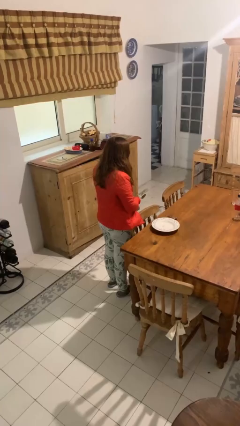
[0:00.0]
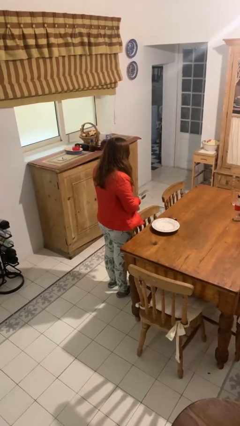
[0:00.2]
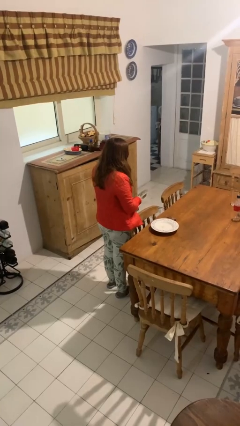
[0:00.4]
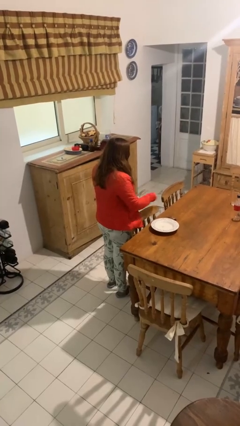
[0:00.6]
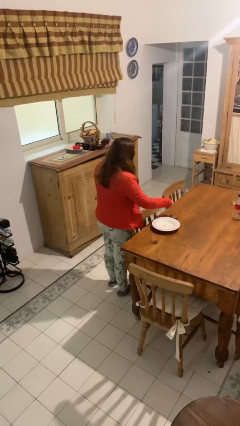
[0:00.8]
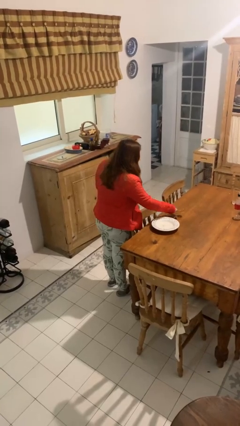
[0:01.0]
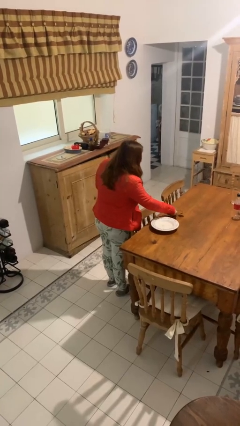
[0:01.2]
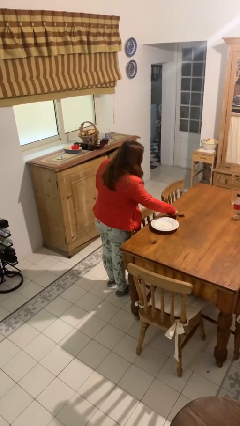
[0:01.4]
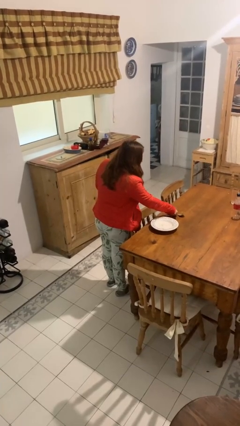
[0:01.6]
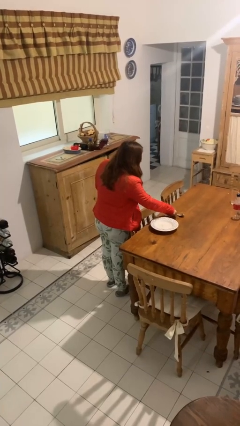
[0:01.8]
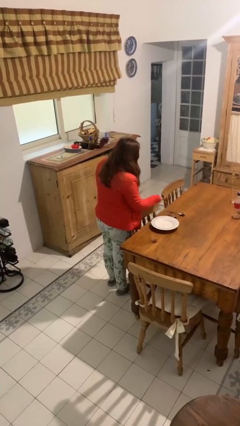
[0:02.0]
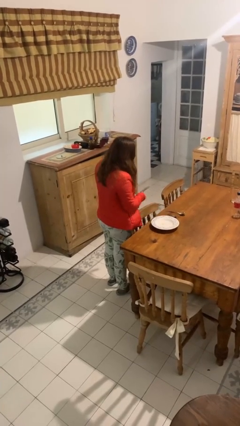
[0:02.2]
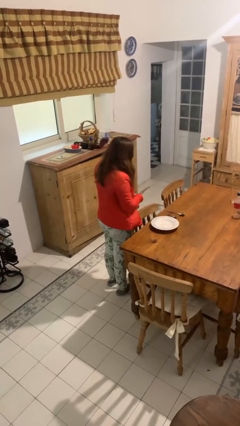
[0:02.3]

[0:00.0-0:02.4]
person sets table

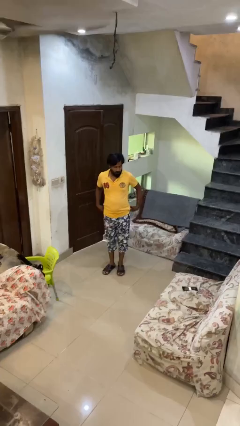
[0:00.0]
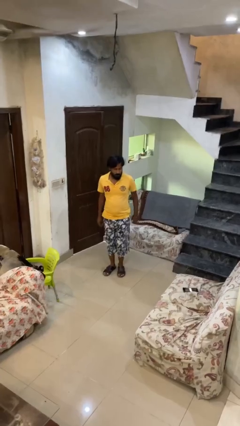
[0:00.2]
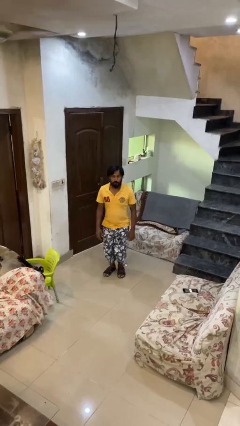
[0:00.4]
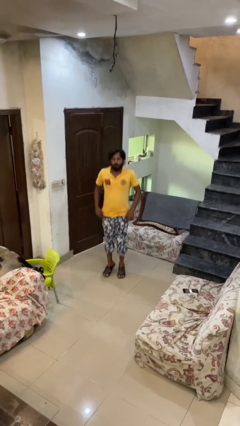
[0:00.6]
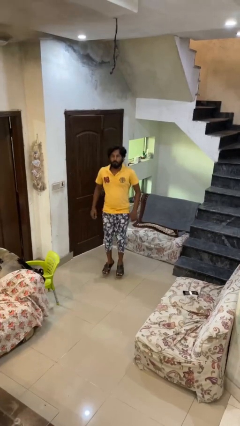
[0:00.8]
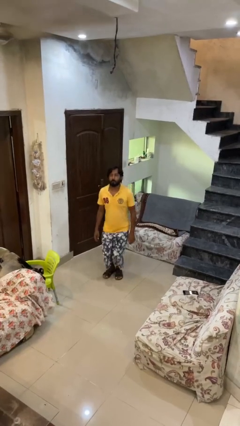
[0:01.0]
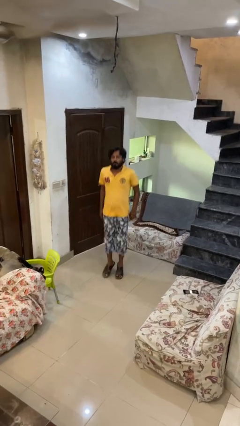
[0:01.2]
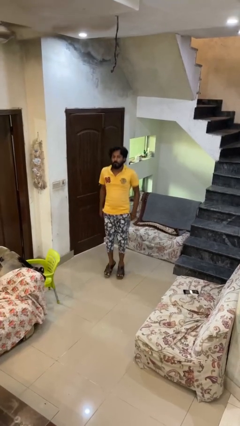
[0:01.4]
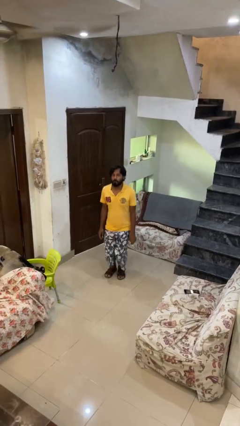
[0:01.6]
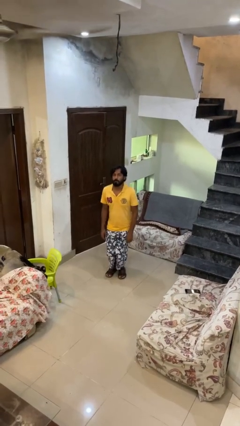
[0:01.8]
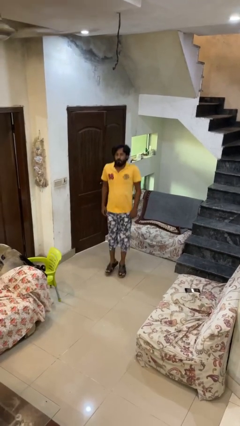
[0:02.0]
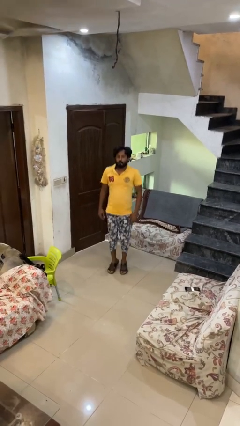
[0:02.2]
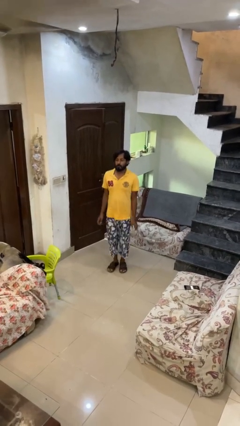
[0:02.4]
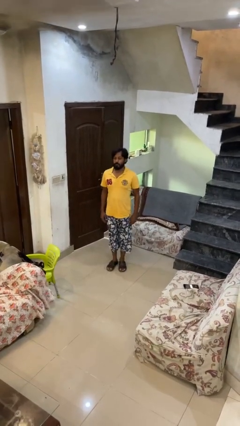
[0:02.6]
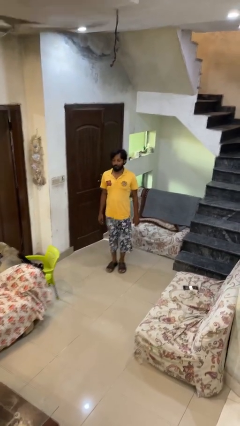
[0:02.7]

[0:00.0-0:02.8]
person jumps

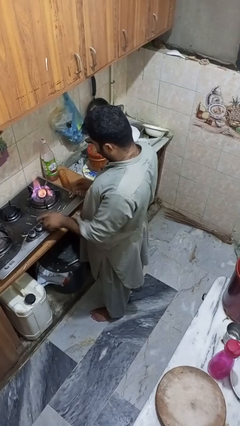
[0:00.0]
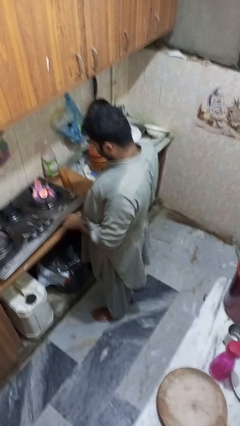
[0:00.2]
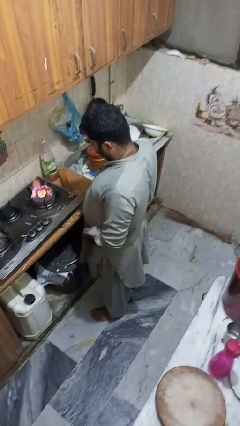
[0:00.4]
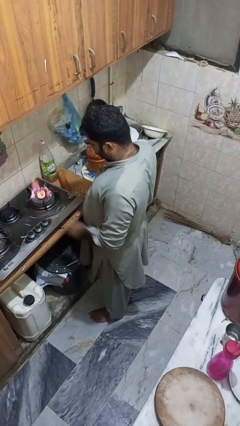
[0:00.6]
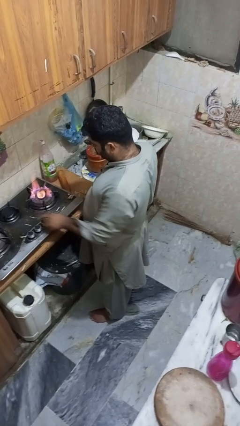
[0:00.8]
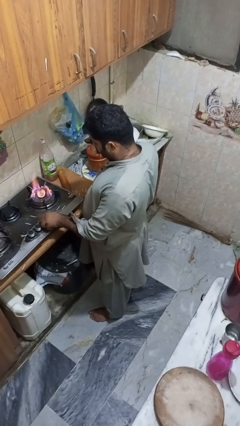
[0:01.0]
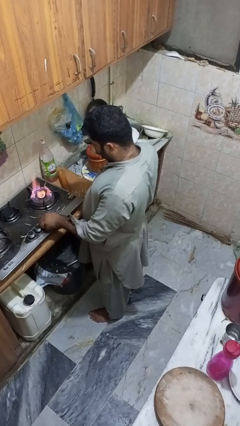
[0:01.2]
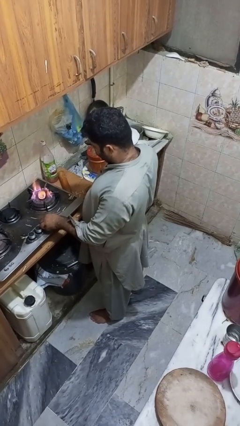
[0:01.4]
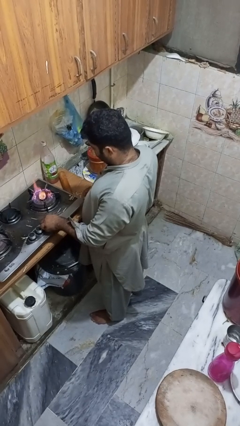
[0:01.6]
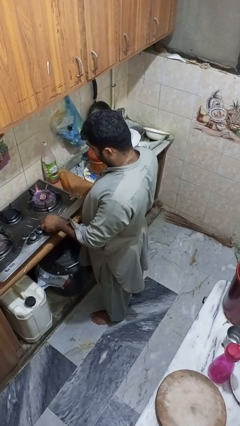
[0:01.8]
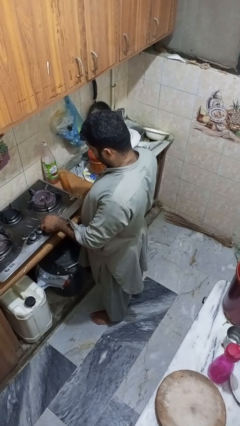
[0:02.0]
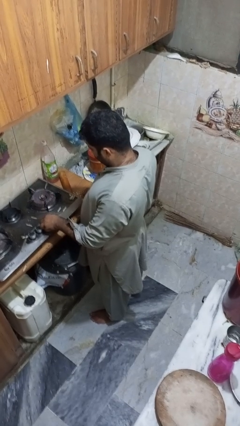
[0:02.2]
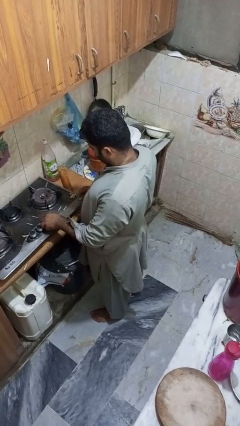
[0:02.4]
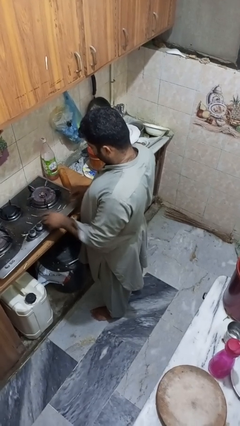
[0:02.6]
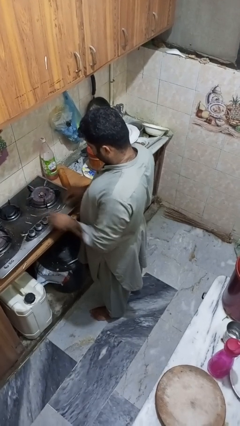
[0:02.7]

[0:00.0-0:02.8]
person turns off stovetop

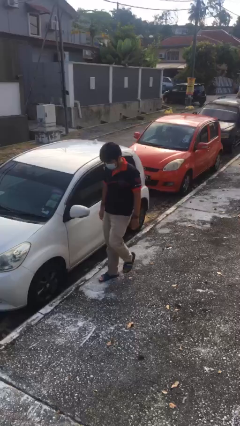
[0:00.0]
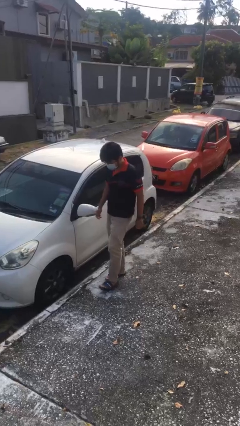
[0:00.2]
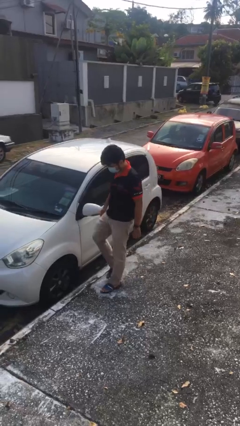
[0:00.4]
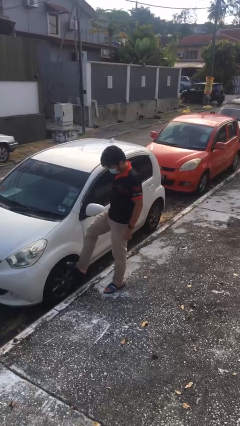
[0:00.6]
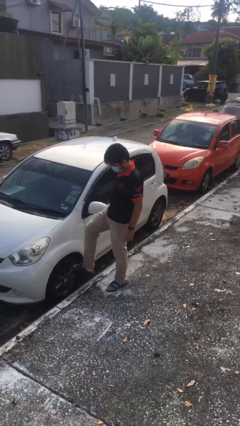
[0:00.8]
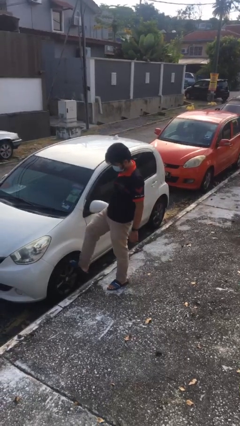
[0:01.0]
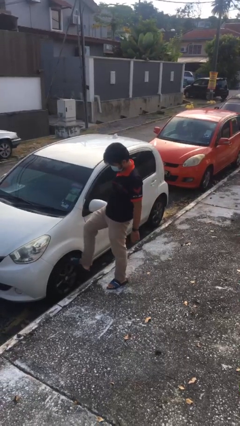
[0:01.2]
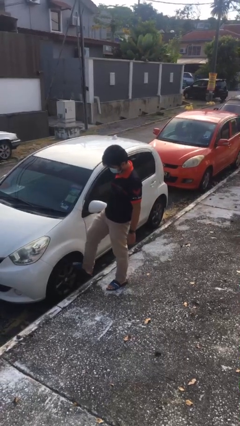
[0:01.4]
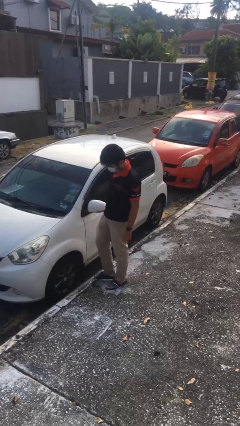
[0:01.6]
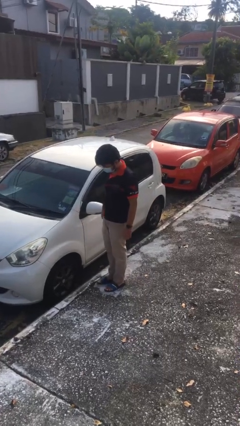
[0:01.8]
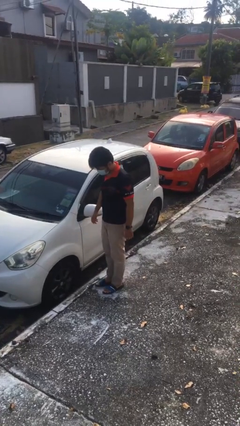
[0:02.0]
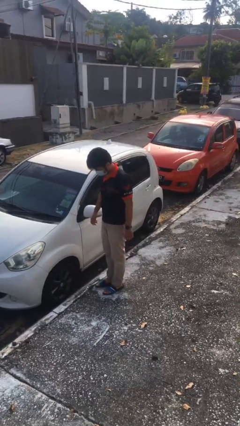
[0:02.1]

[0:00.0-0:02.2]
person kicks car tires

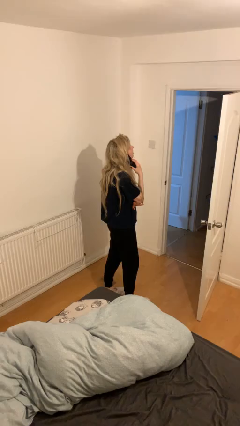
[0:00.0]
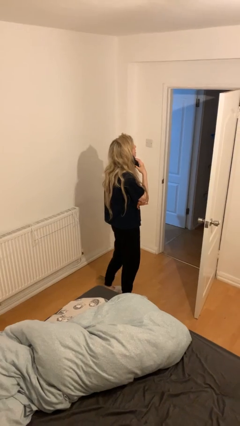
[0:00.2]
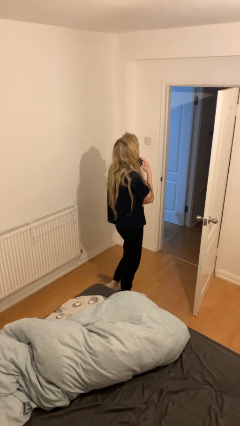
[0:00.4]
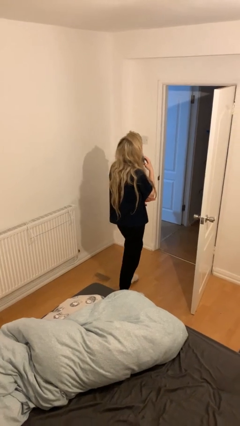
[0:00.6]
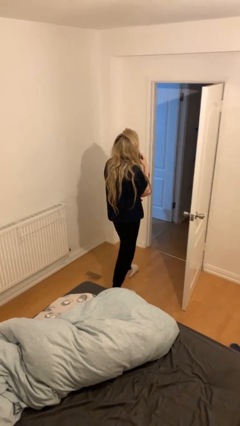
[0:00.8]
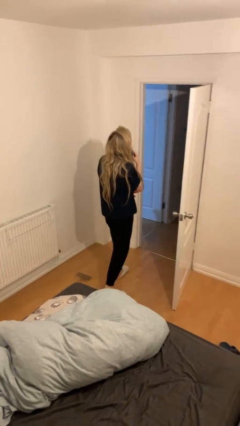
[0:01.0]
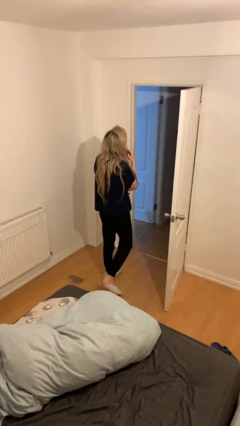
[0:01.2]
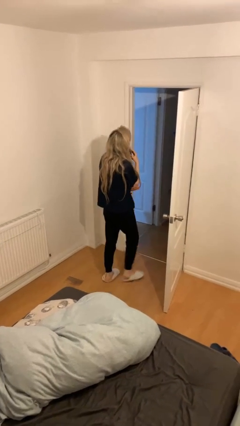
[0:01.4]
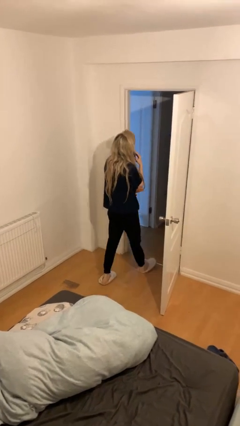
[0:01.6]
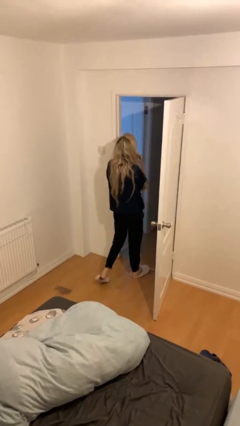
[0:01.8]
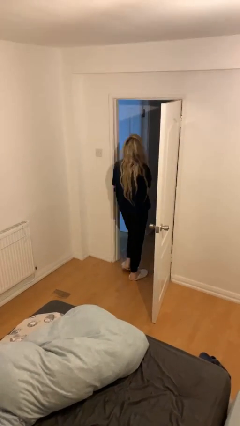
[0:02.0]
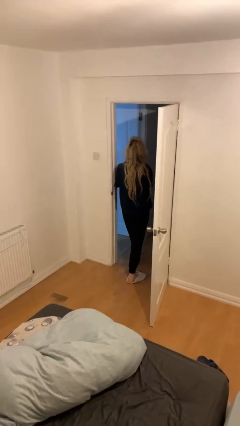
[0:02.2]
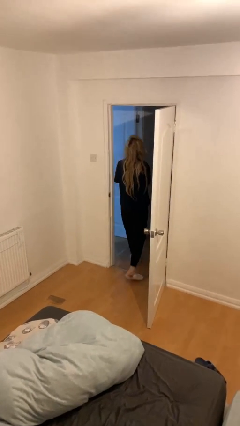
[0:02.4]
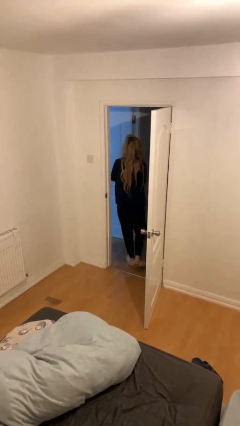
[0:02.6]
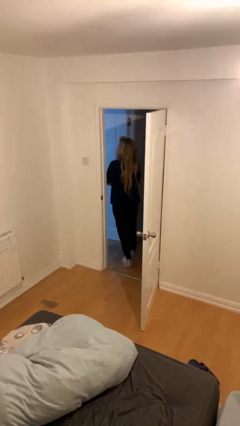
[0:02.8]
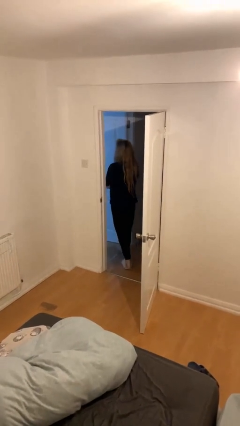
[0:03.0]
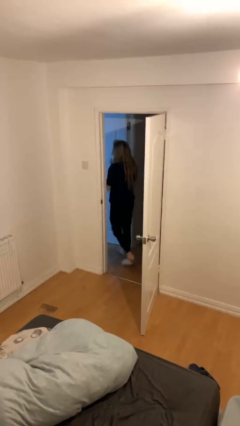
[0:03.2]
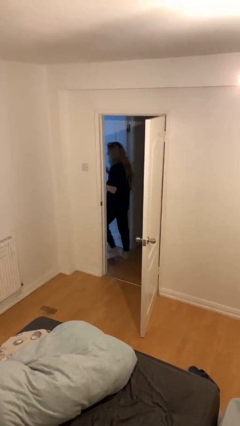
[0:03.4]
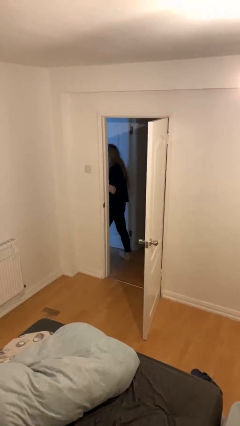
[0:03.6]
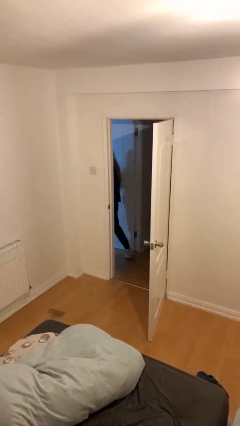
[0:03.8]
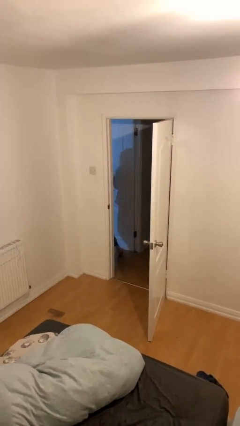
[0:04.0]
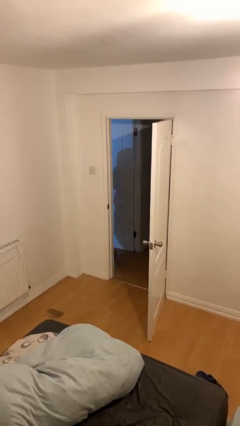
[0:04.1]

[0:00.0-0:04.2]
person exits scene through structure

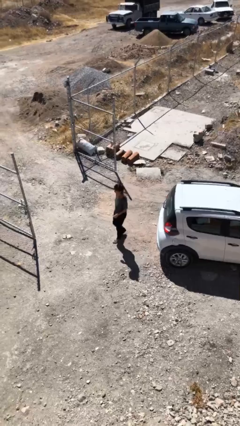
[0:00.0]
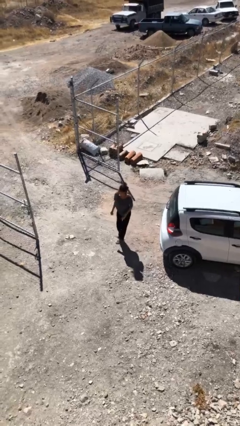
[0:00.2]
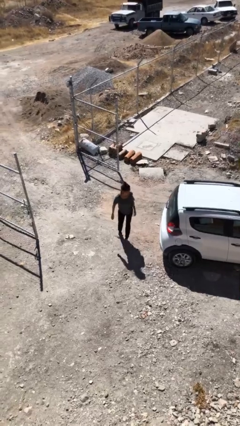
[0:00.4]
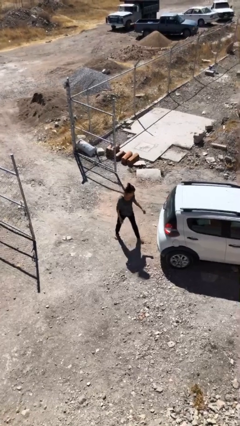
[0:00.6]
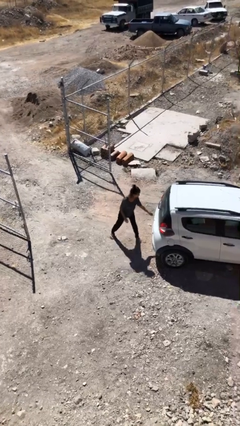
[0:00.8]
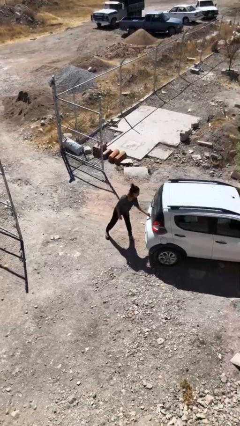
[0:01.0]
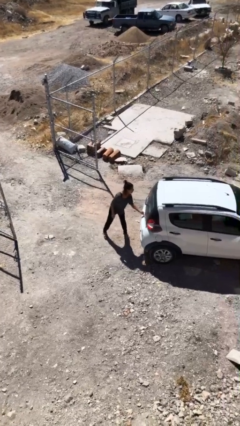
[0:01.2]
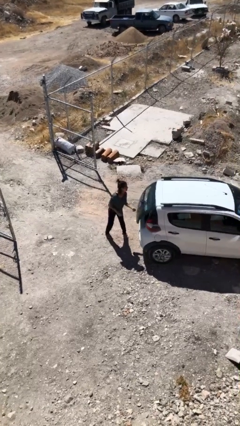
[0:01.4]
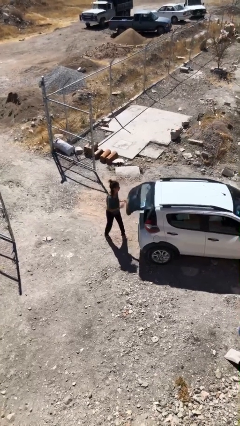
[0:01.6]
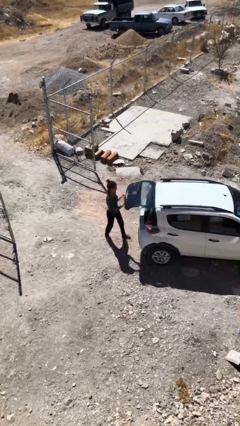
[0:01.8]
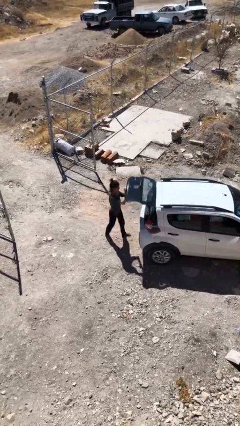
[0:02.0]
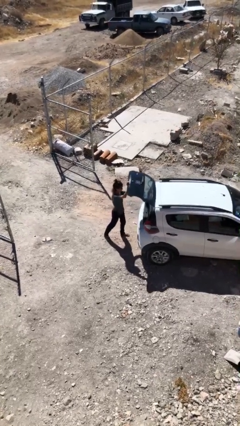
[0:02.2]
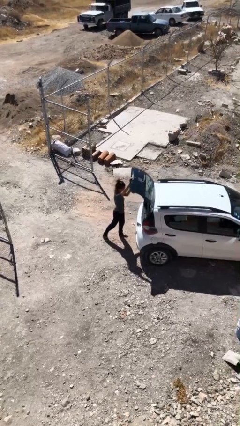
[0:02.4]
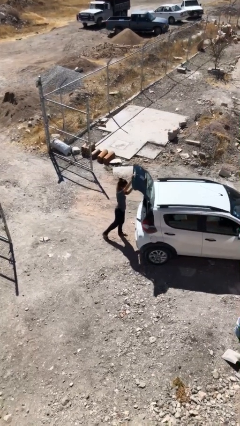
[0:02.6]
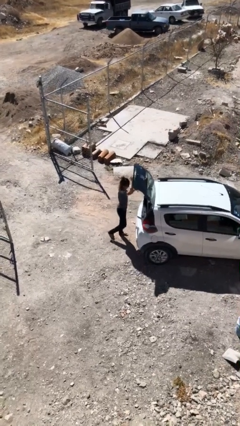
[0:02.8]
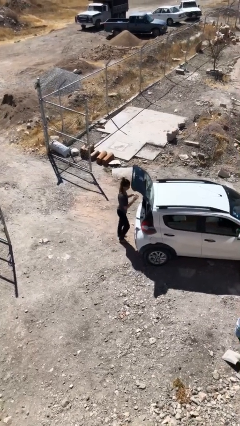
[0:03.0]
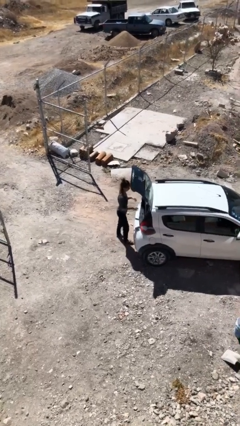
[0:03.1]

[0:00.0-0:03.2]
person opens car trunk
